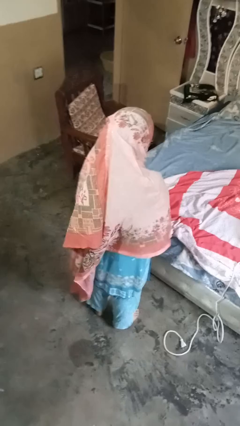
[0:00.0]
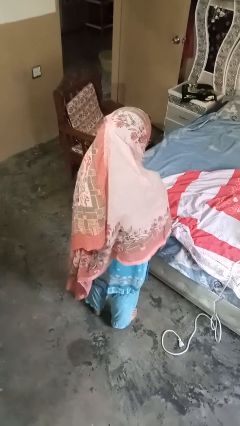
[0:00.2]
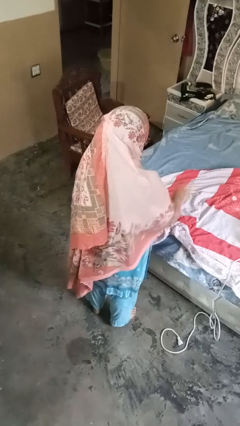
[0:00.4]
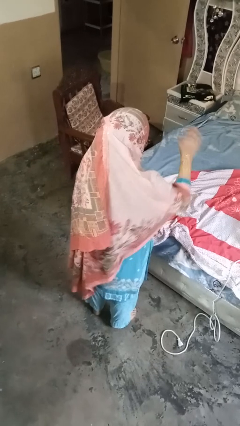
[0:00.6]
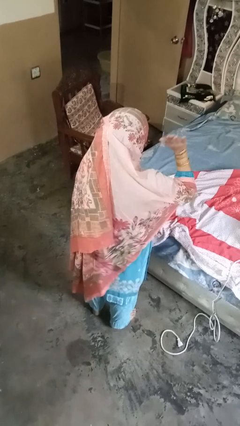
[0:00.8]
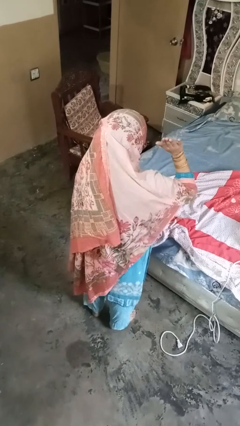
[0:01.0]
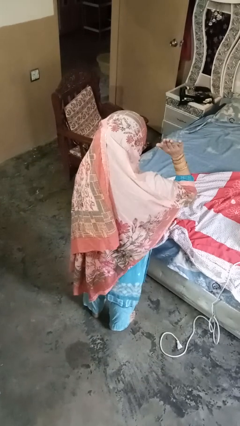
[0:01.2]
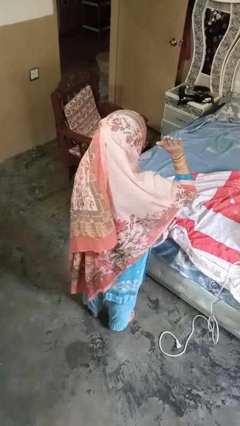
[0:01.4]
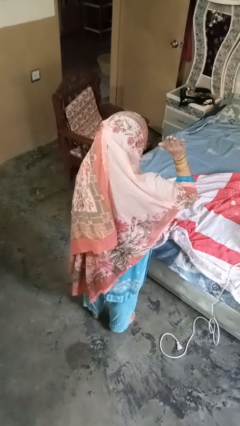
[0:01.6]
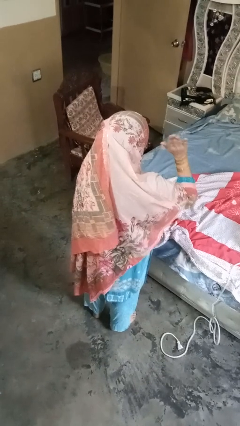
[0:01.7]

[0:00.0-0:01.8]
person handstand
